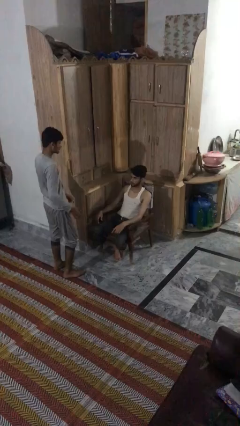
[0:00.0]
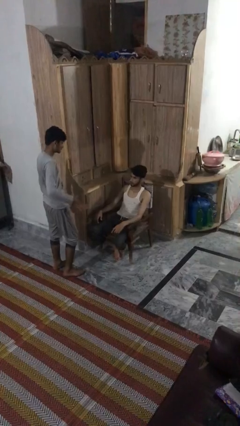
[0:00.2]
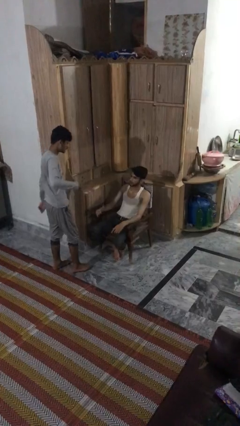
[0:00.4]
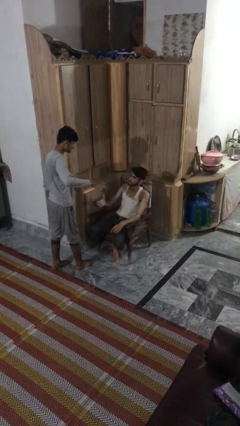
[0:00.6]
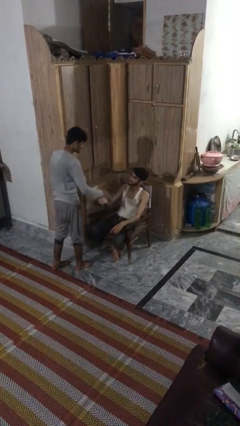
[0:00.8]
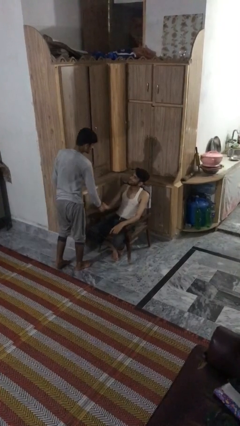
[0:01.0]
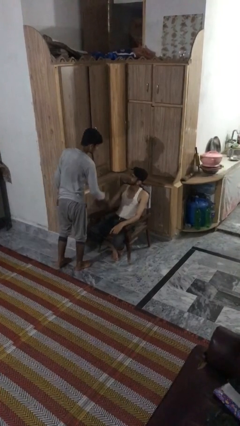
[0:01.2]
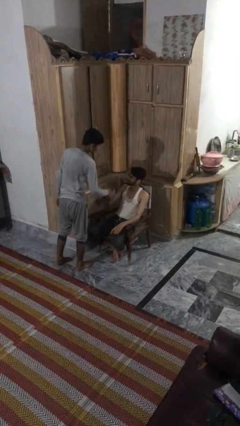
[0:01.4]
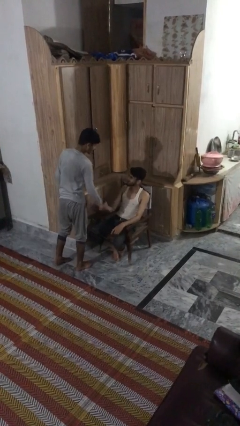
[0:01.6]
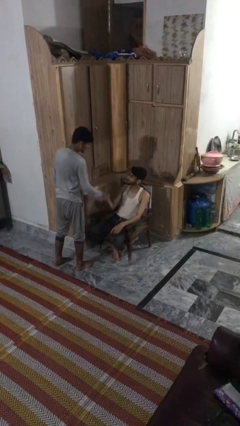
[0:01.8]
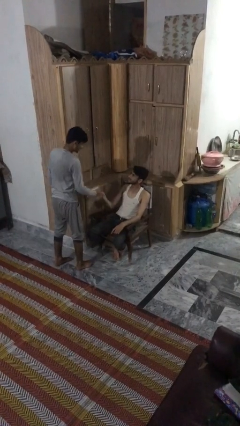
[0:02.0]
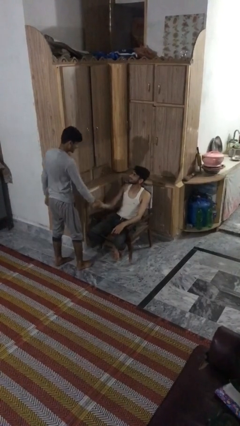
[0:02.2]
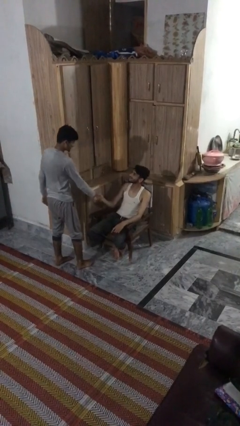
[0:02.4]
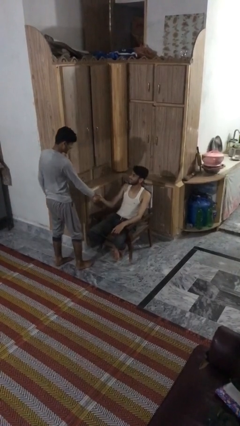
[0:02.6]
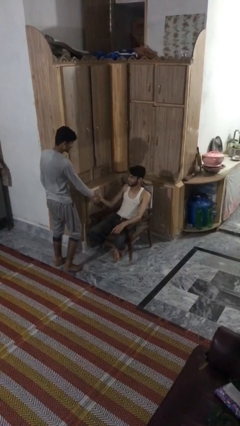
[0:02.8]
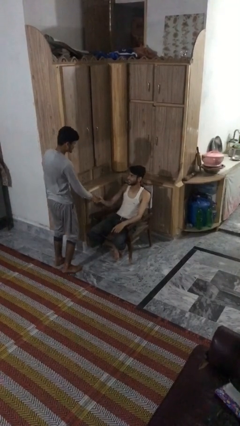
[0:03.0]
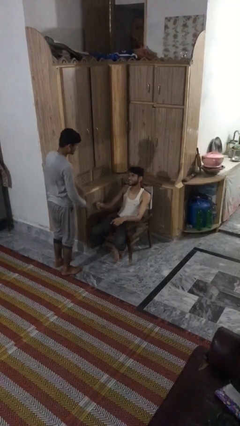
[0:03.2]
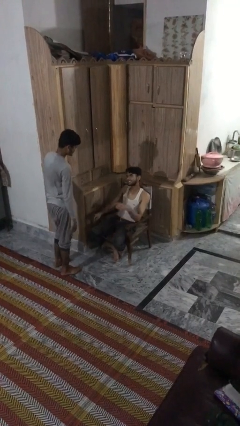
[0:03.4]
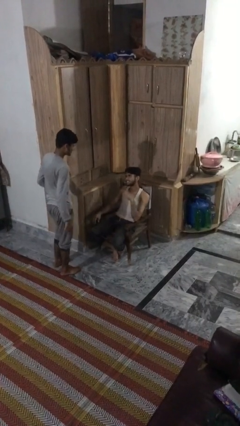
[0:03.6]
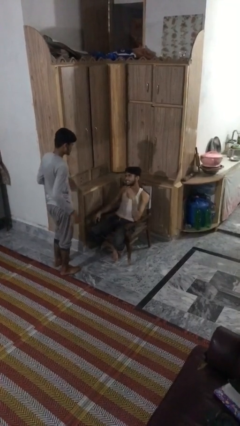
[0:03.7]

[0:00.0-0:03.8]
person shakes hand

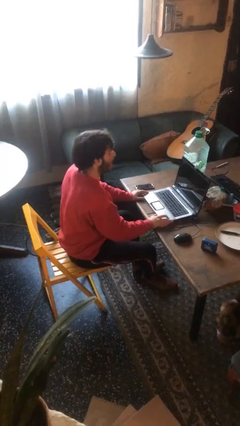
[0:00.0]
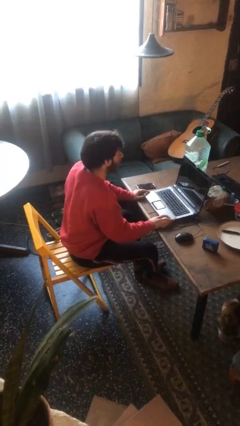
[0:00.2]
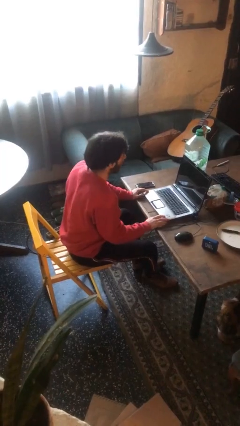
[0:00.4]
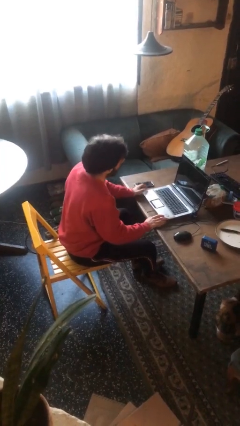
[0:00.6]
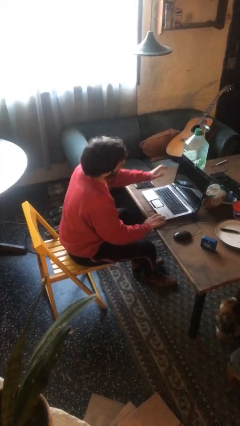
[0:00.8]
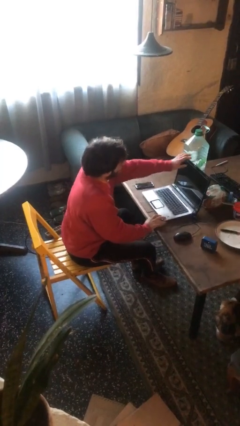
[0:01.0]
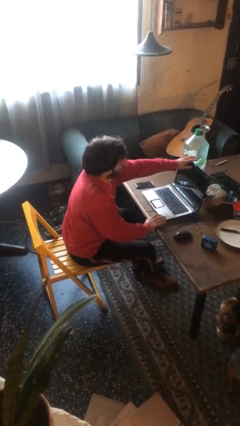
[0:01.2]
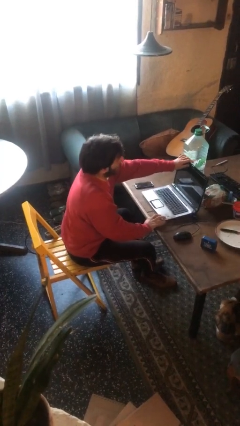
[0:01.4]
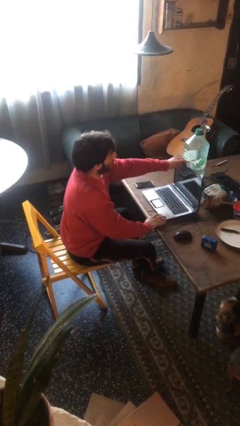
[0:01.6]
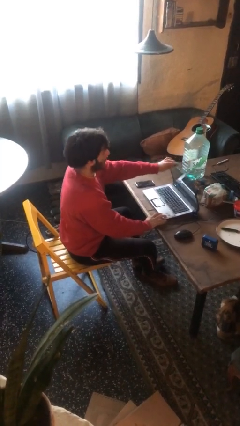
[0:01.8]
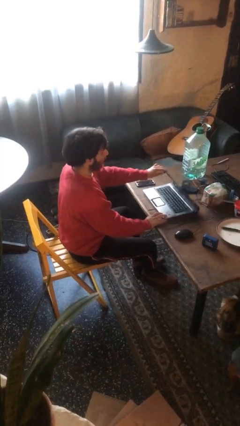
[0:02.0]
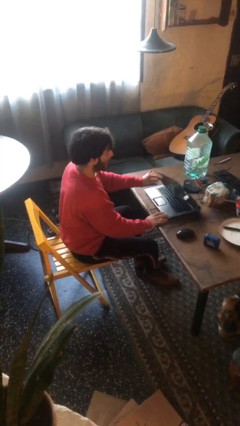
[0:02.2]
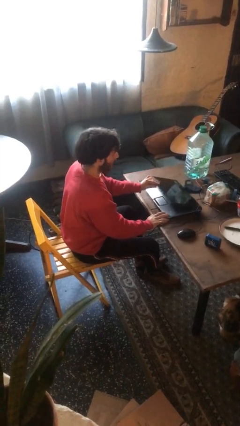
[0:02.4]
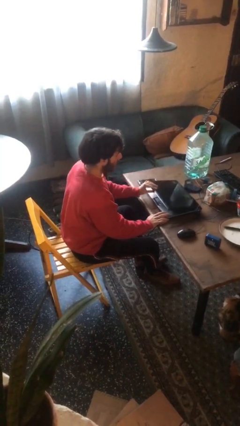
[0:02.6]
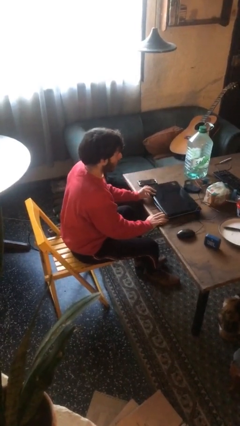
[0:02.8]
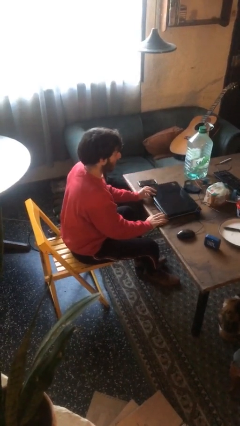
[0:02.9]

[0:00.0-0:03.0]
person closes laptop

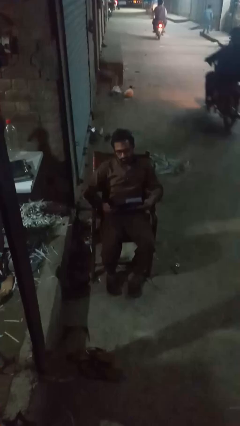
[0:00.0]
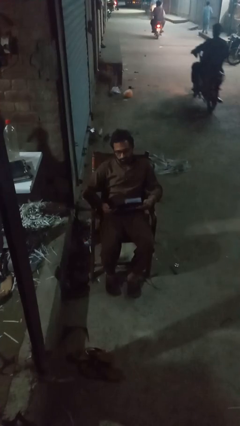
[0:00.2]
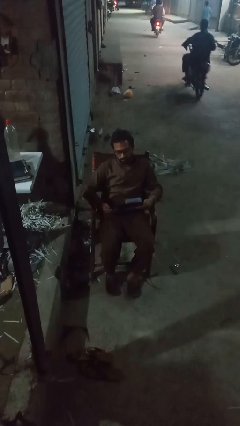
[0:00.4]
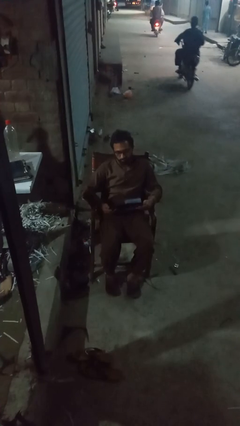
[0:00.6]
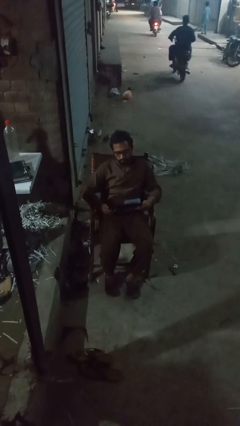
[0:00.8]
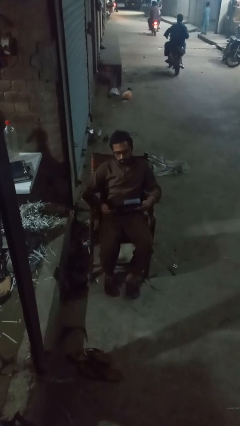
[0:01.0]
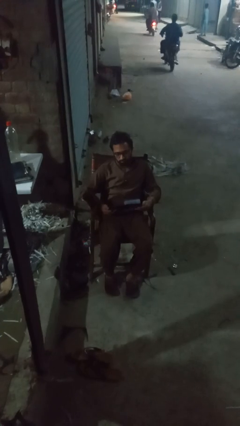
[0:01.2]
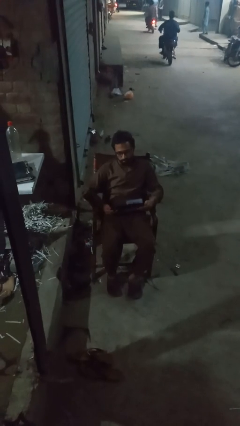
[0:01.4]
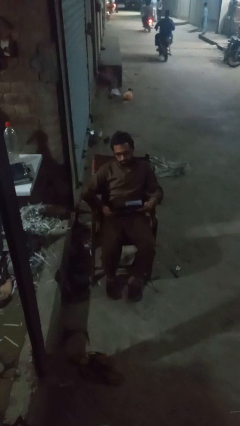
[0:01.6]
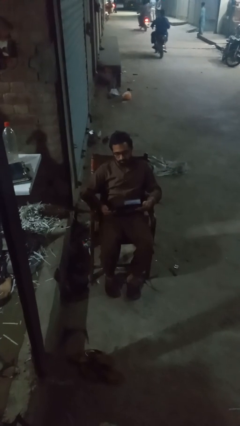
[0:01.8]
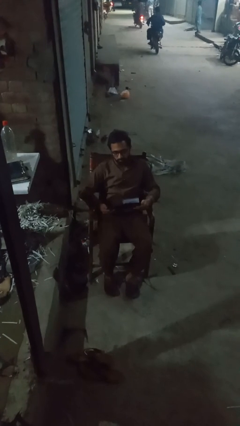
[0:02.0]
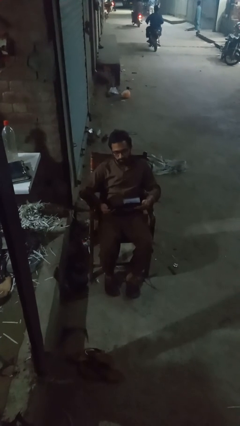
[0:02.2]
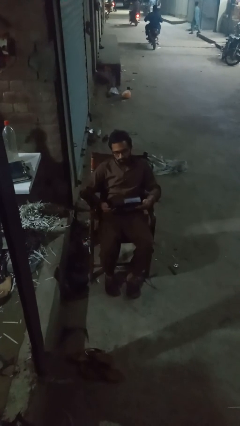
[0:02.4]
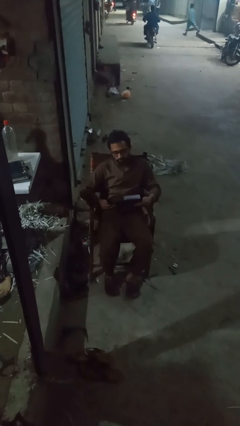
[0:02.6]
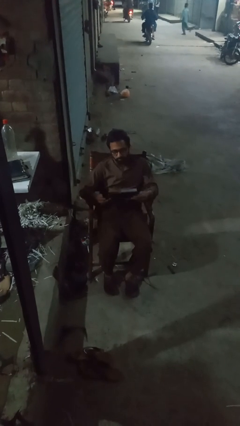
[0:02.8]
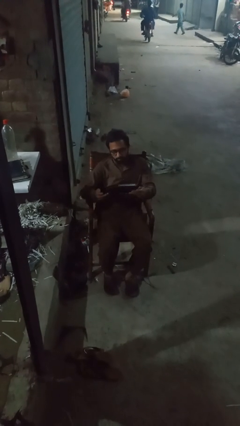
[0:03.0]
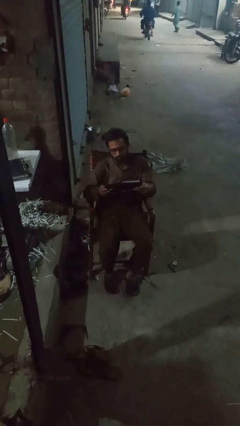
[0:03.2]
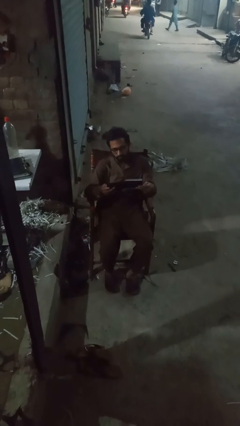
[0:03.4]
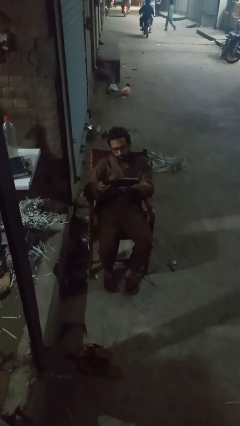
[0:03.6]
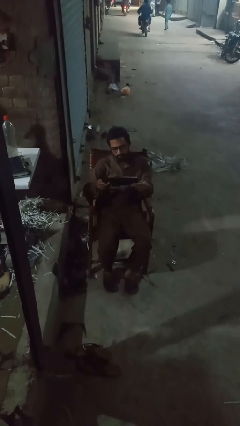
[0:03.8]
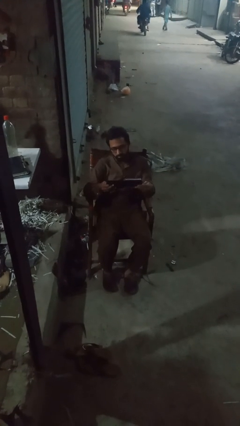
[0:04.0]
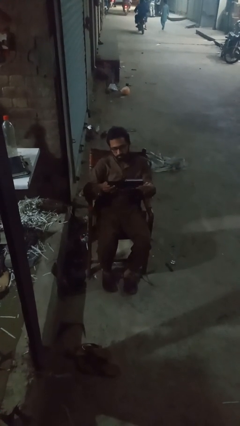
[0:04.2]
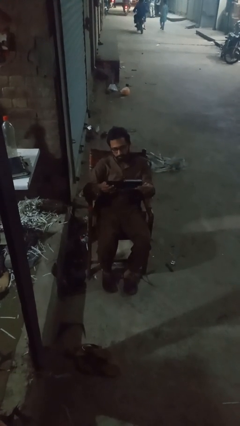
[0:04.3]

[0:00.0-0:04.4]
person interacts with handheld game

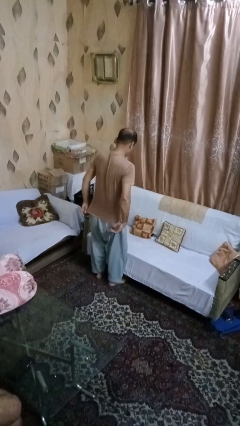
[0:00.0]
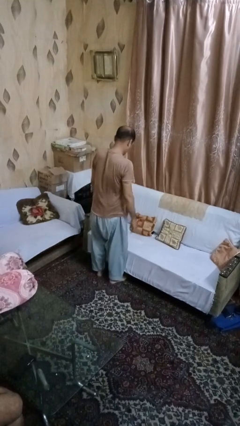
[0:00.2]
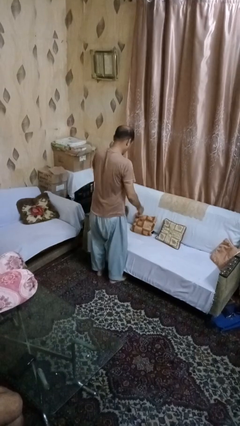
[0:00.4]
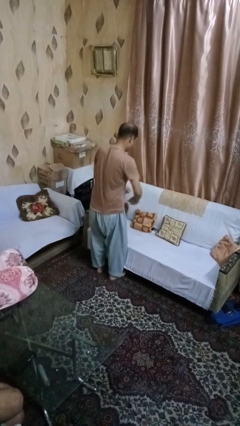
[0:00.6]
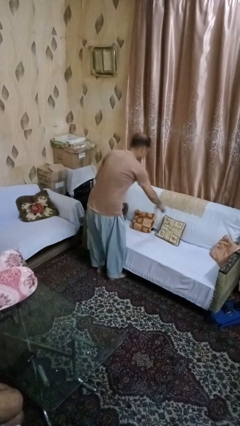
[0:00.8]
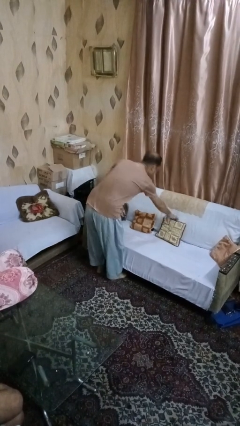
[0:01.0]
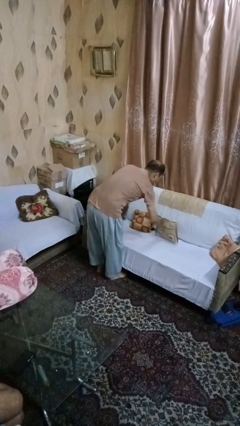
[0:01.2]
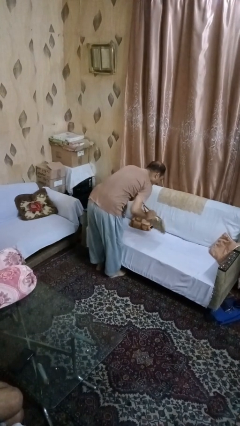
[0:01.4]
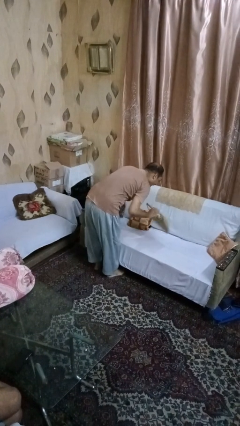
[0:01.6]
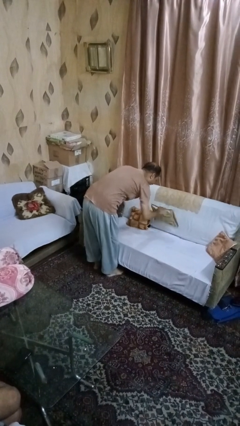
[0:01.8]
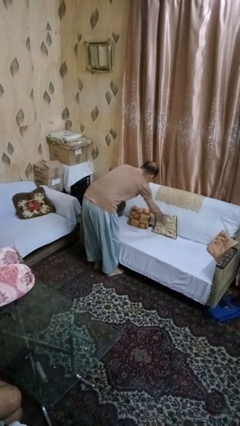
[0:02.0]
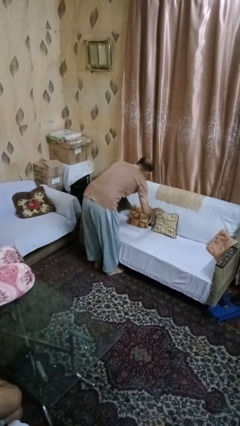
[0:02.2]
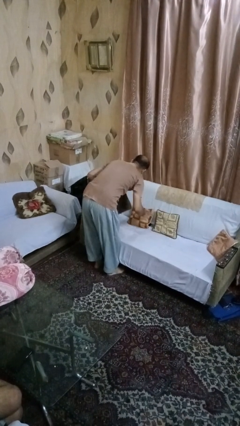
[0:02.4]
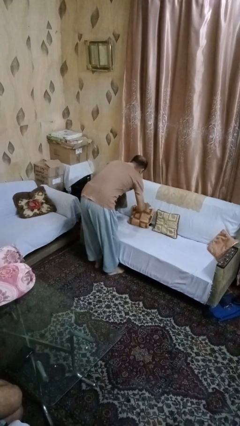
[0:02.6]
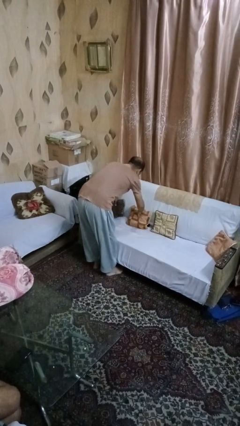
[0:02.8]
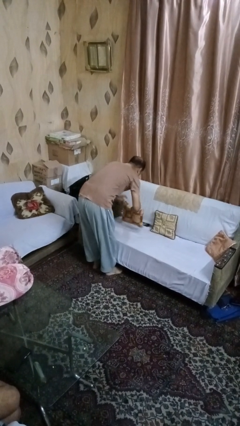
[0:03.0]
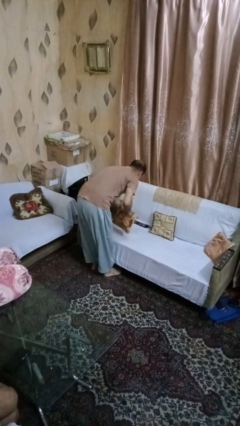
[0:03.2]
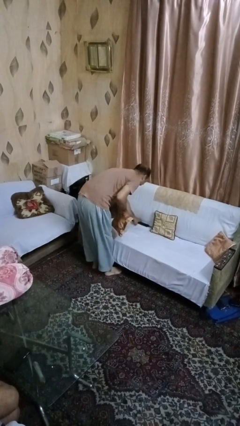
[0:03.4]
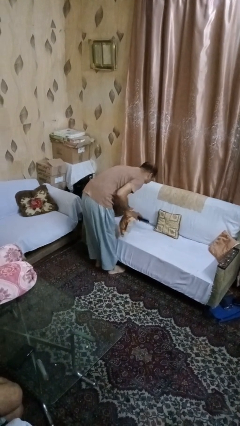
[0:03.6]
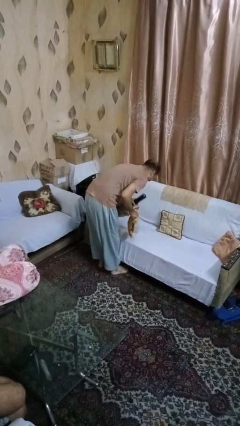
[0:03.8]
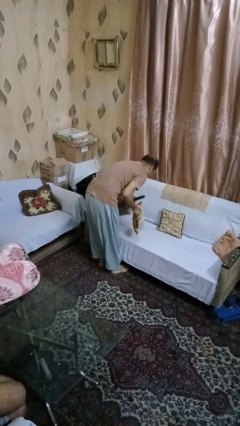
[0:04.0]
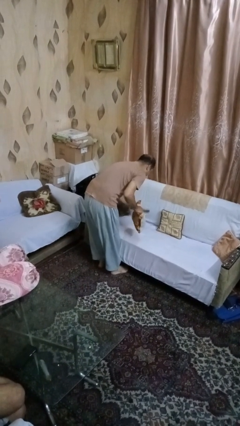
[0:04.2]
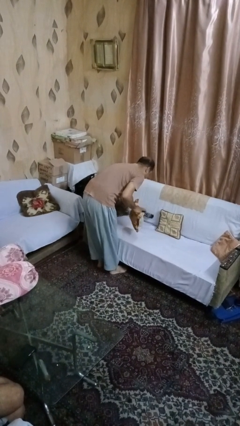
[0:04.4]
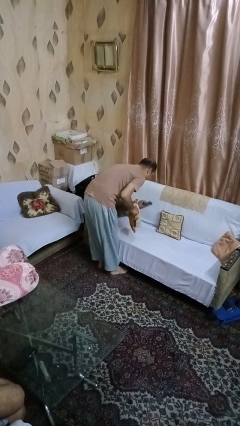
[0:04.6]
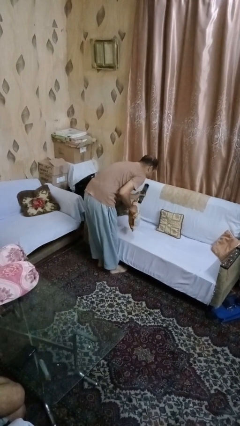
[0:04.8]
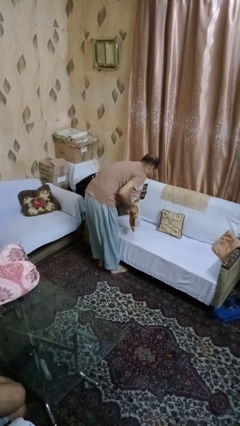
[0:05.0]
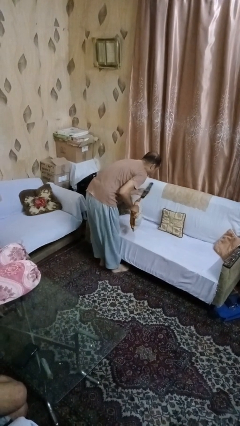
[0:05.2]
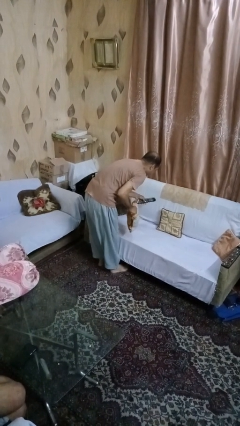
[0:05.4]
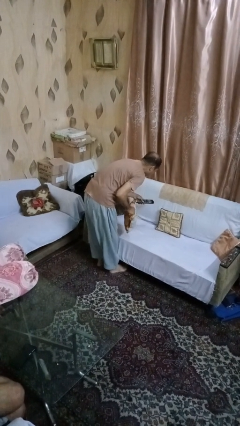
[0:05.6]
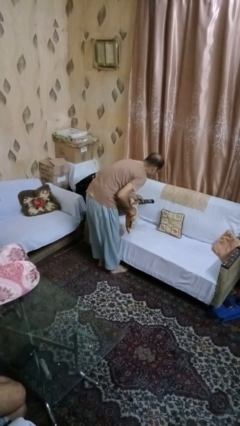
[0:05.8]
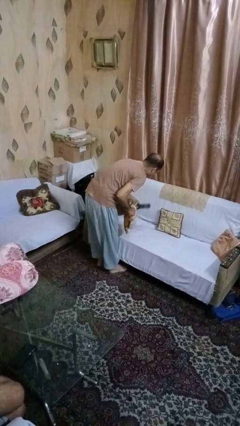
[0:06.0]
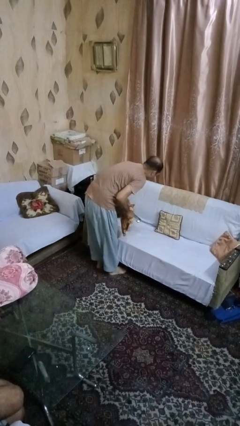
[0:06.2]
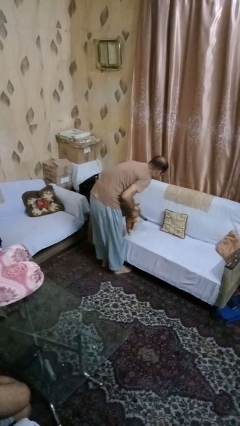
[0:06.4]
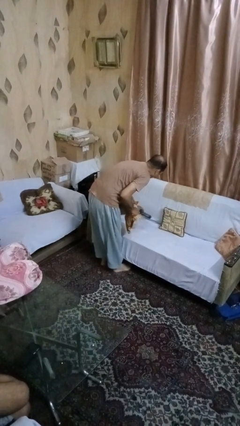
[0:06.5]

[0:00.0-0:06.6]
person searches in couch

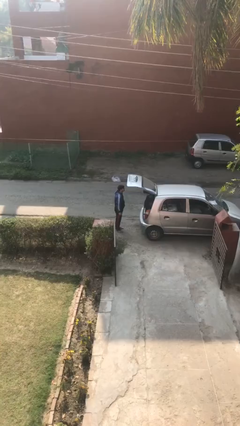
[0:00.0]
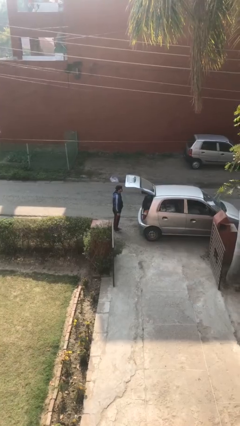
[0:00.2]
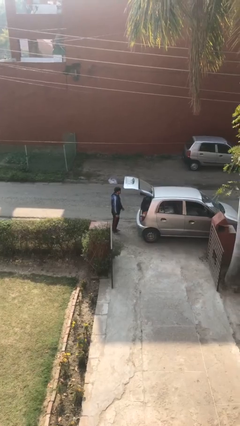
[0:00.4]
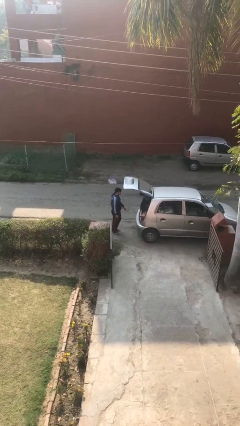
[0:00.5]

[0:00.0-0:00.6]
person unloads car
